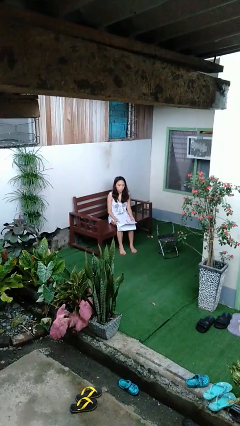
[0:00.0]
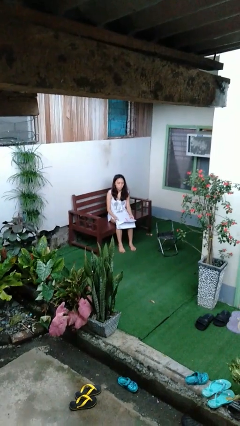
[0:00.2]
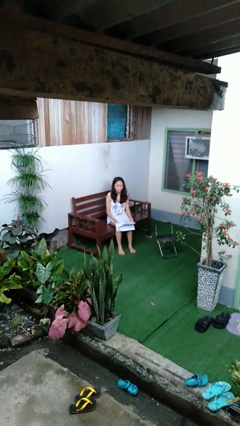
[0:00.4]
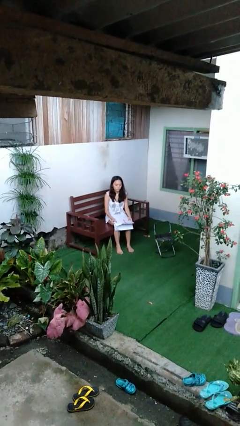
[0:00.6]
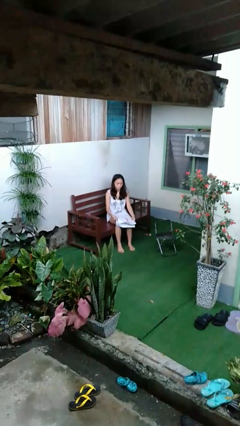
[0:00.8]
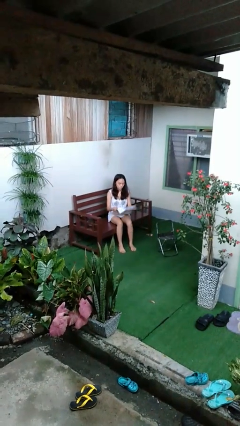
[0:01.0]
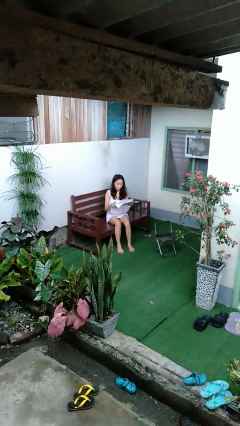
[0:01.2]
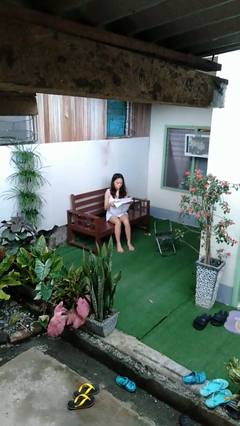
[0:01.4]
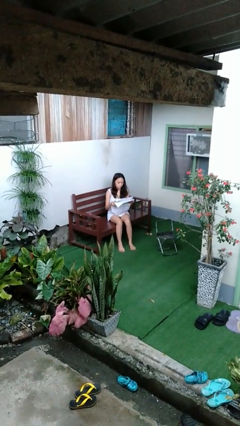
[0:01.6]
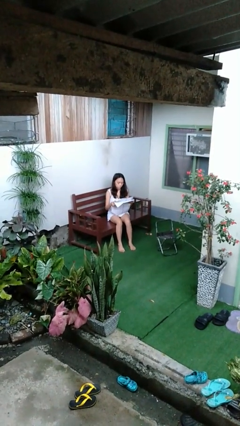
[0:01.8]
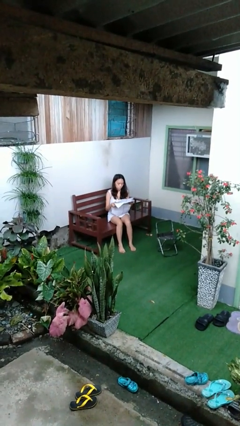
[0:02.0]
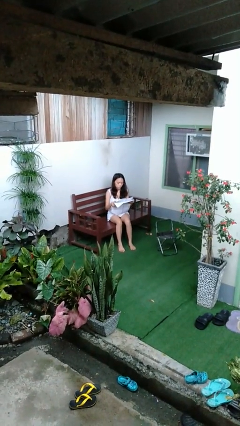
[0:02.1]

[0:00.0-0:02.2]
person reads newspaper

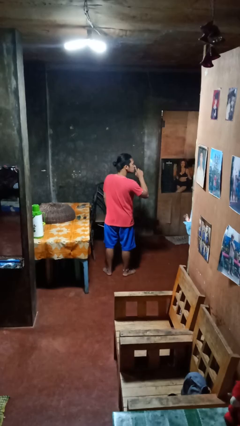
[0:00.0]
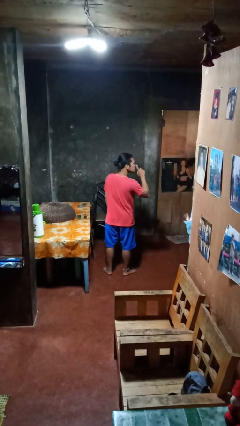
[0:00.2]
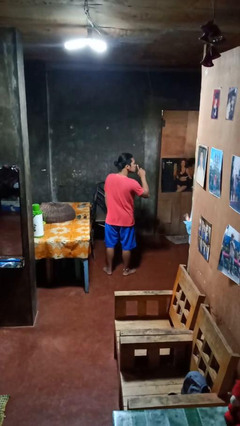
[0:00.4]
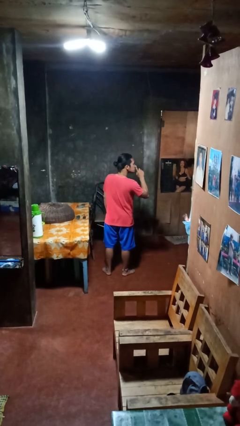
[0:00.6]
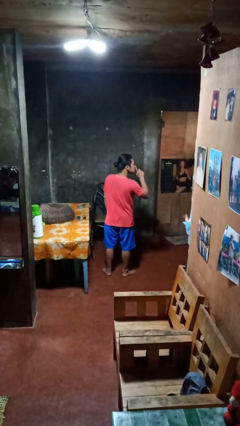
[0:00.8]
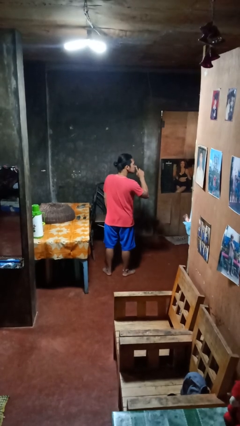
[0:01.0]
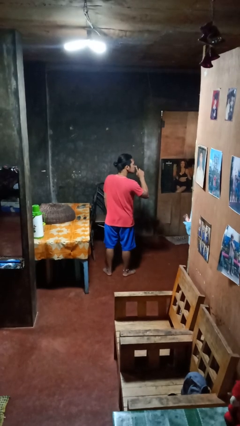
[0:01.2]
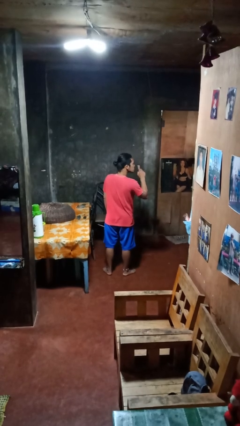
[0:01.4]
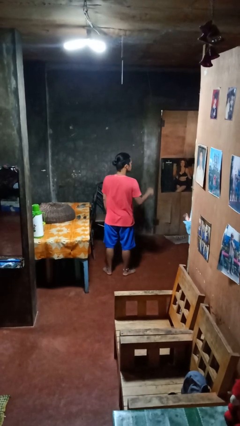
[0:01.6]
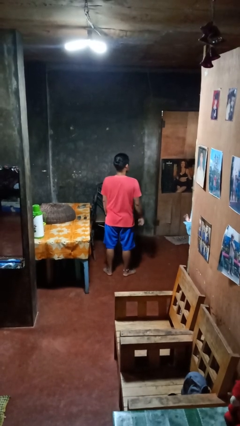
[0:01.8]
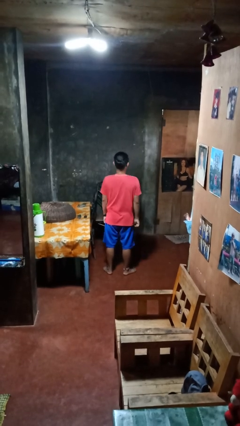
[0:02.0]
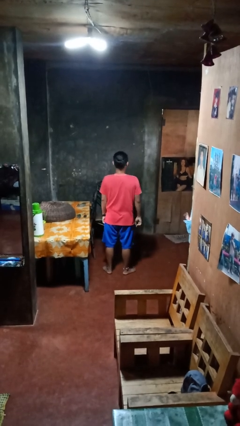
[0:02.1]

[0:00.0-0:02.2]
person gestures be quiet

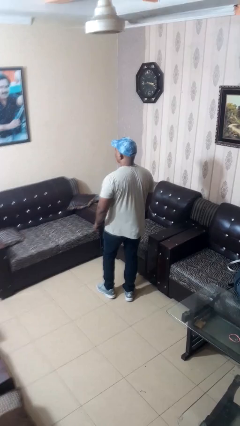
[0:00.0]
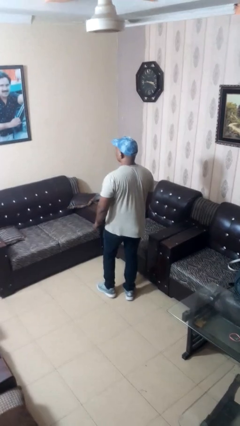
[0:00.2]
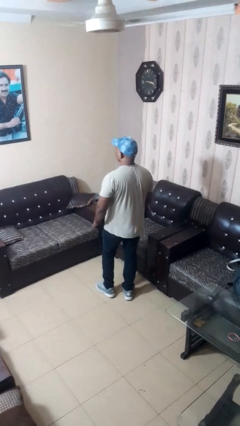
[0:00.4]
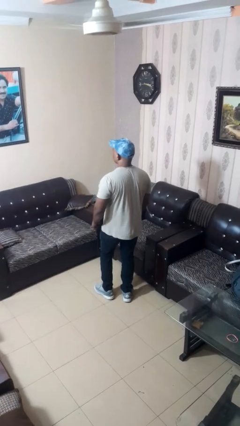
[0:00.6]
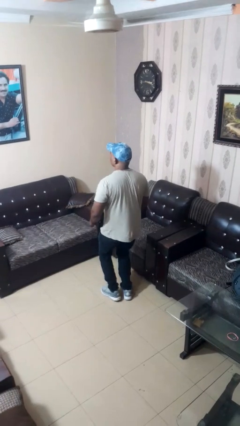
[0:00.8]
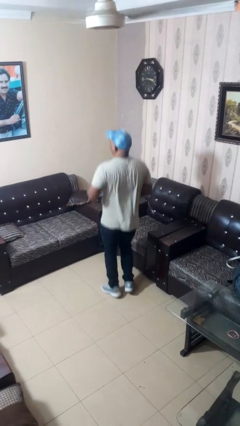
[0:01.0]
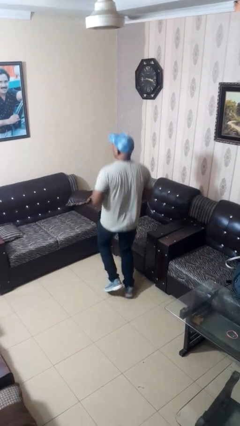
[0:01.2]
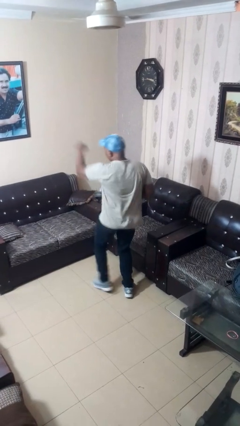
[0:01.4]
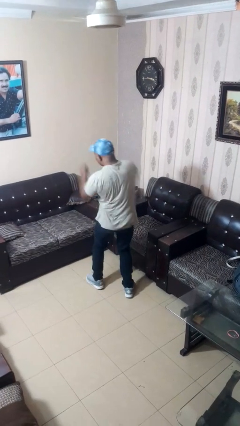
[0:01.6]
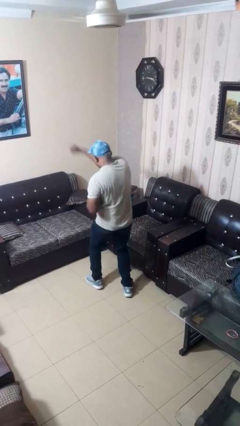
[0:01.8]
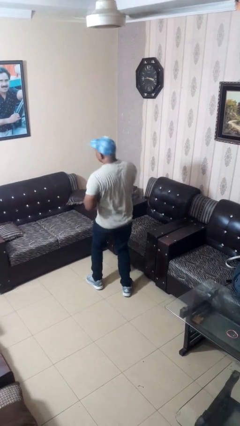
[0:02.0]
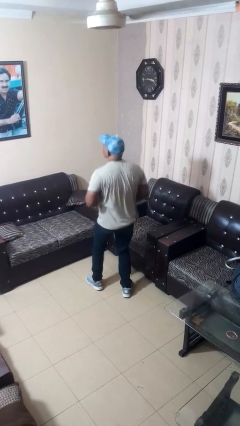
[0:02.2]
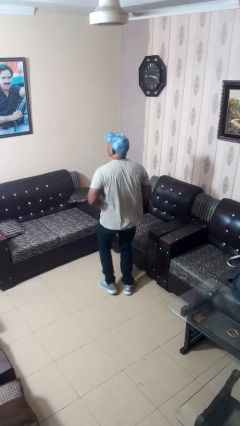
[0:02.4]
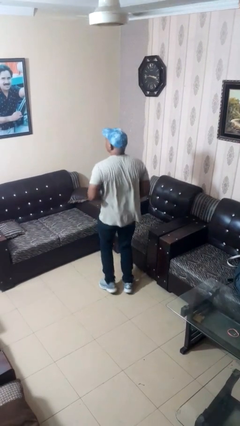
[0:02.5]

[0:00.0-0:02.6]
person punches

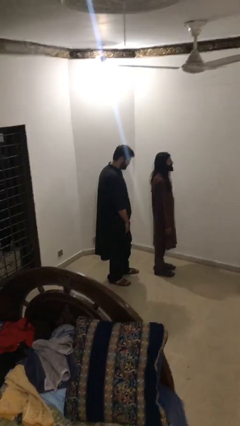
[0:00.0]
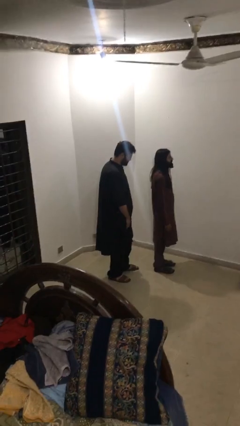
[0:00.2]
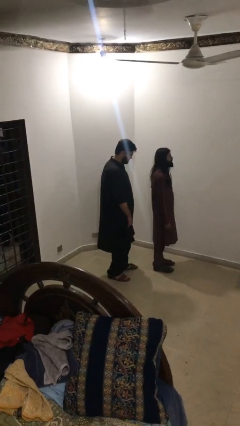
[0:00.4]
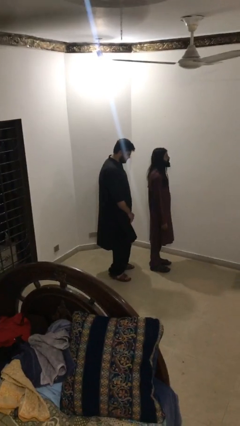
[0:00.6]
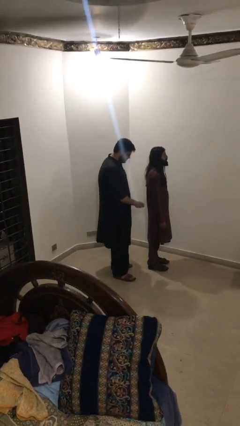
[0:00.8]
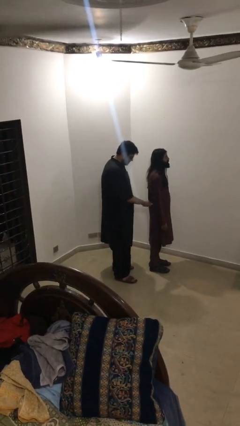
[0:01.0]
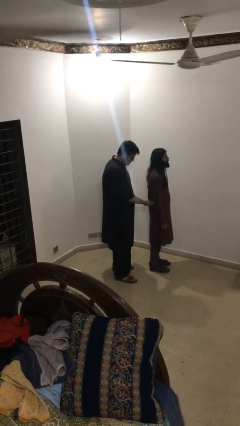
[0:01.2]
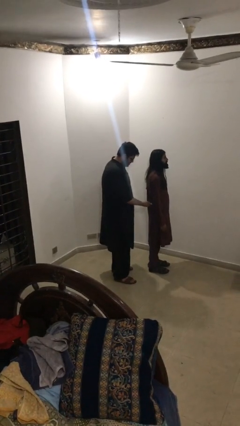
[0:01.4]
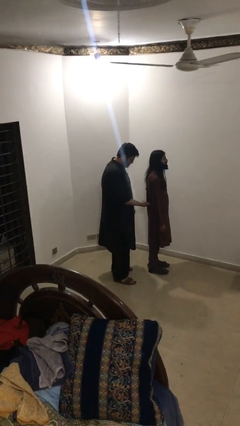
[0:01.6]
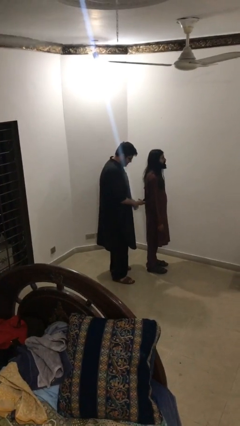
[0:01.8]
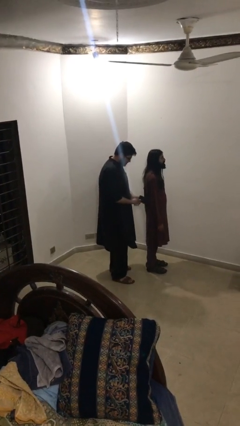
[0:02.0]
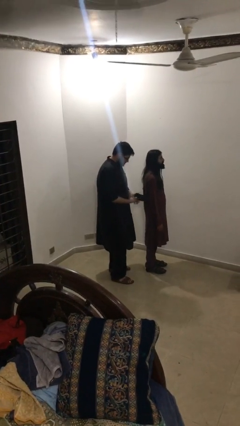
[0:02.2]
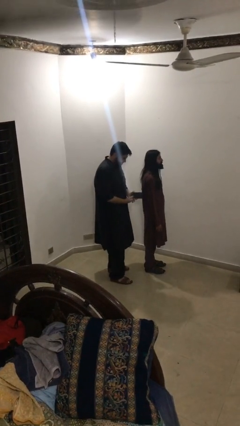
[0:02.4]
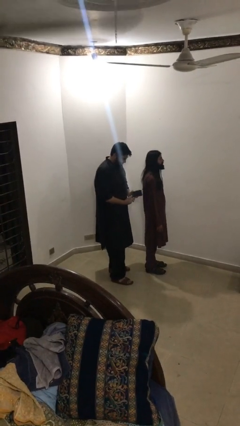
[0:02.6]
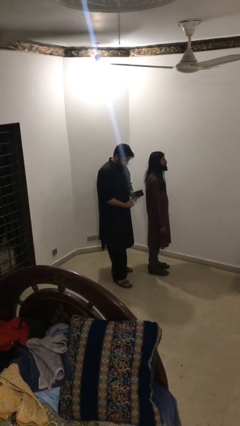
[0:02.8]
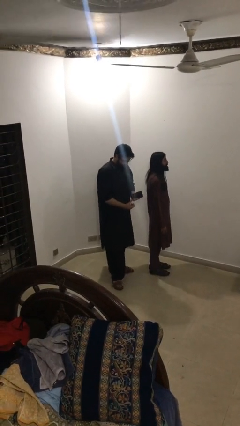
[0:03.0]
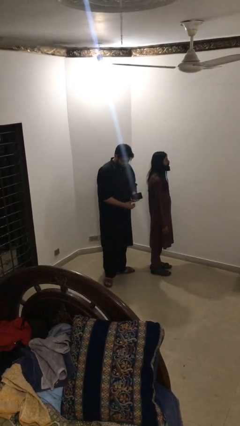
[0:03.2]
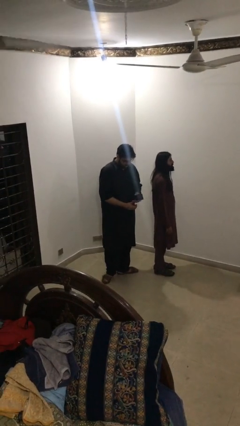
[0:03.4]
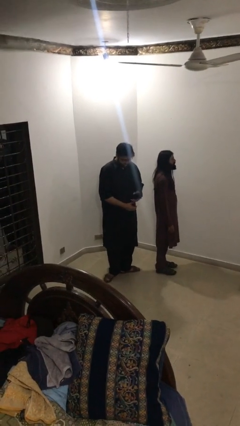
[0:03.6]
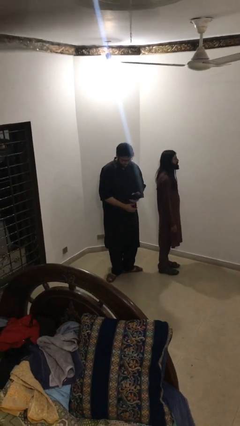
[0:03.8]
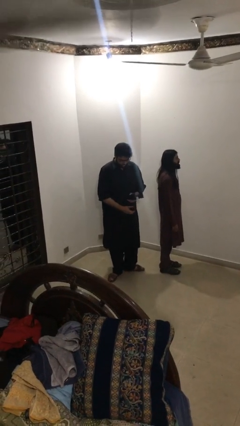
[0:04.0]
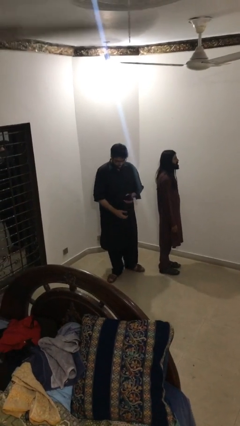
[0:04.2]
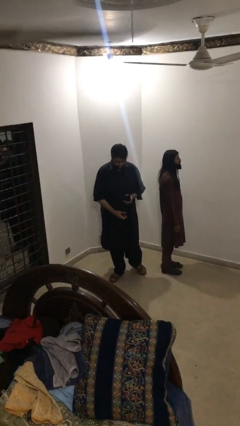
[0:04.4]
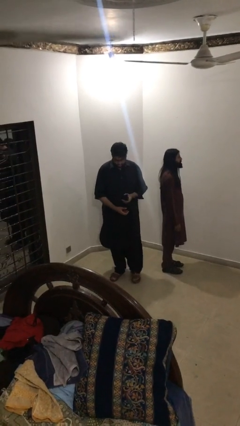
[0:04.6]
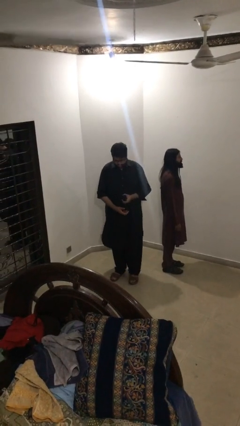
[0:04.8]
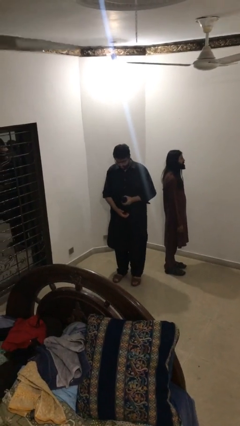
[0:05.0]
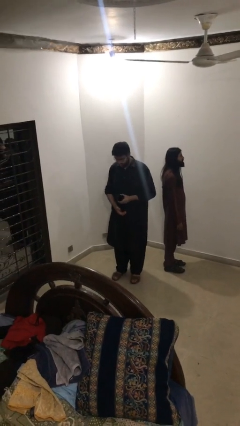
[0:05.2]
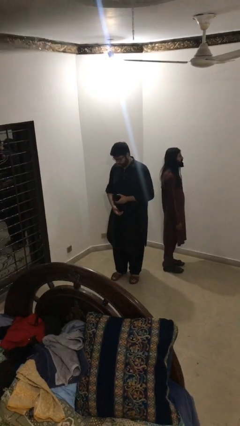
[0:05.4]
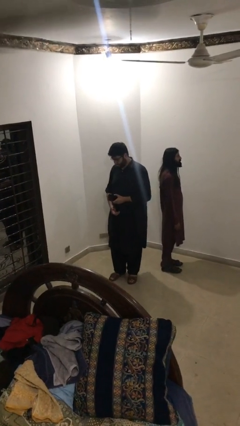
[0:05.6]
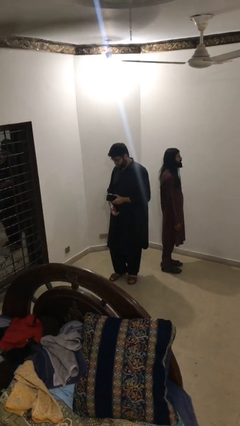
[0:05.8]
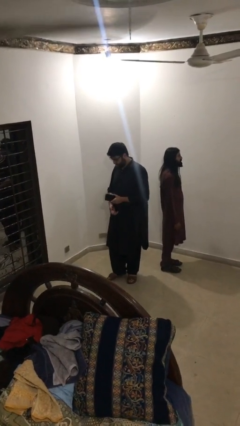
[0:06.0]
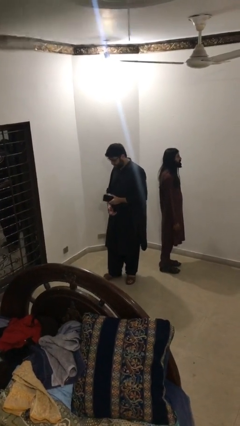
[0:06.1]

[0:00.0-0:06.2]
person steals object from person

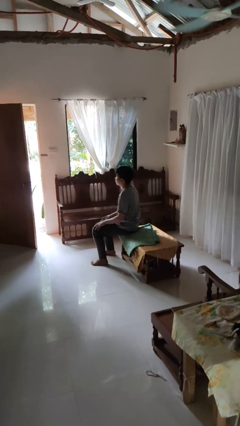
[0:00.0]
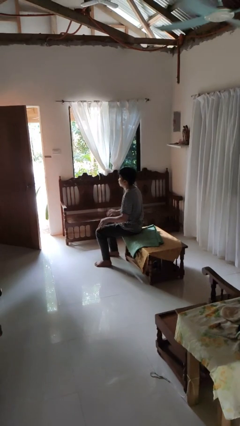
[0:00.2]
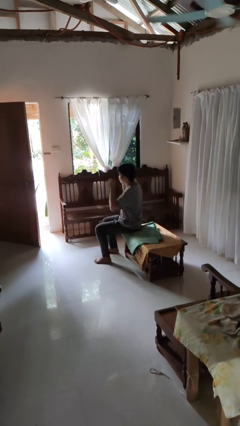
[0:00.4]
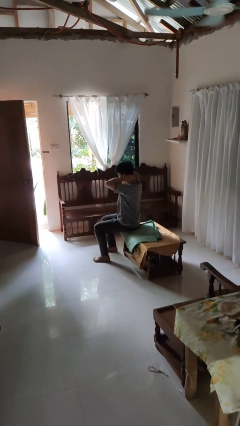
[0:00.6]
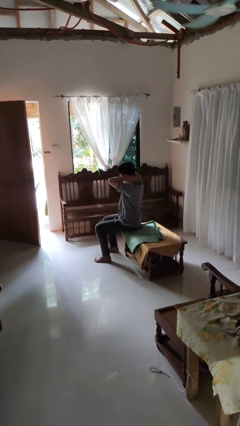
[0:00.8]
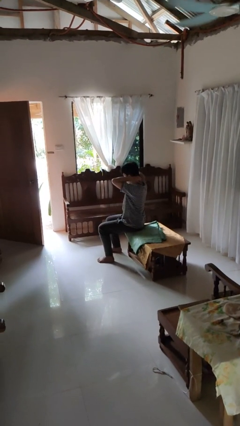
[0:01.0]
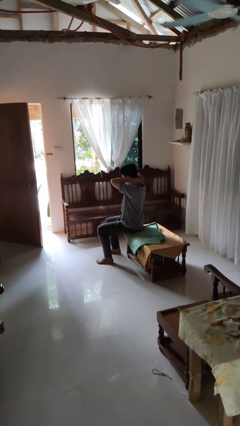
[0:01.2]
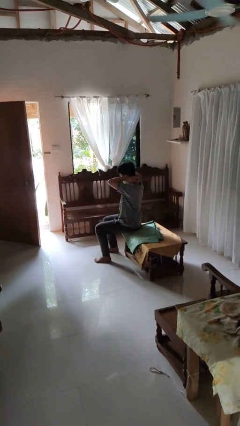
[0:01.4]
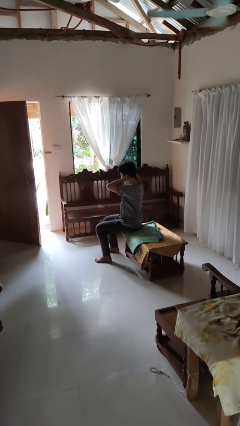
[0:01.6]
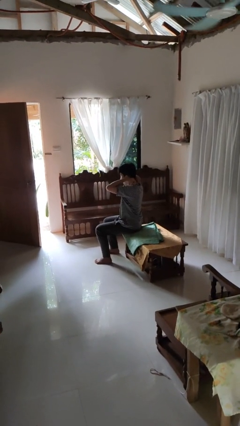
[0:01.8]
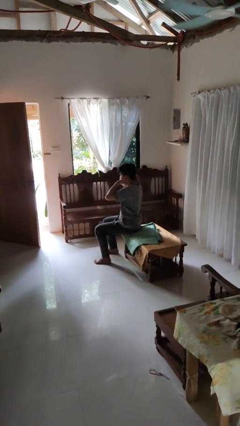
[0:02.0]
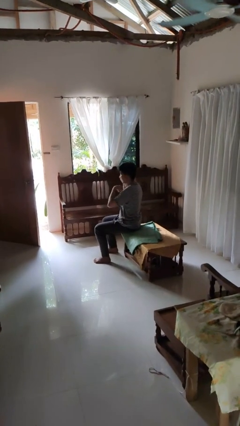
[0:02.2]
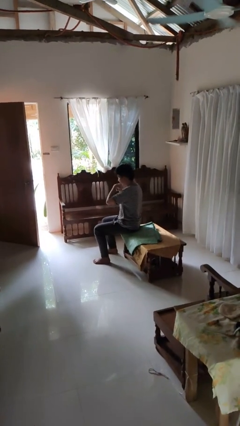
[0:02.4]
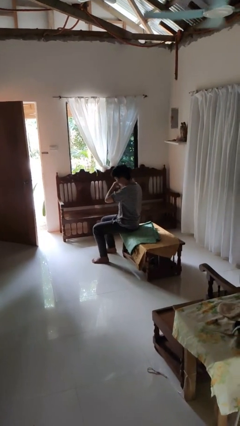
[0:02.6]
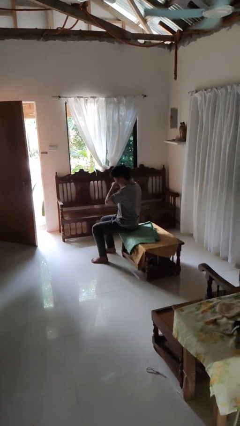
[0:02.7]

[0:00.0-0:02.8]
person takes off necklace

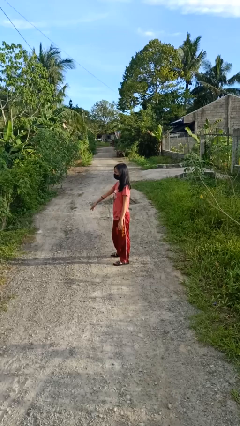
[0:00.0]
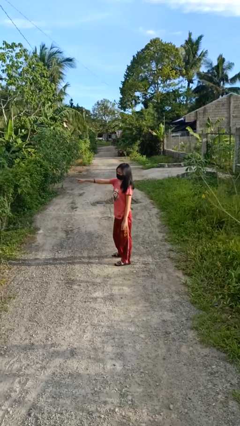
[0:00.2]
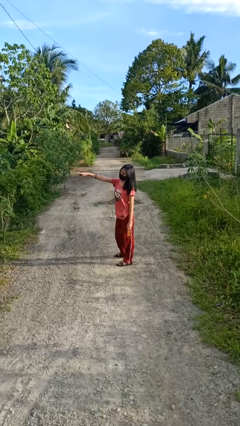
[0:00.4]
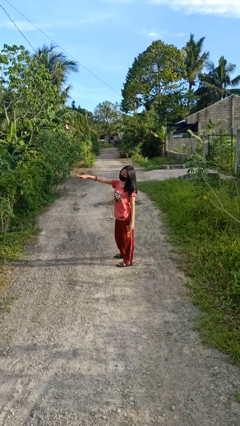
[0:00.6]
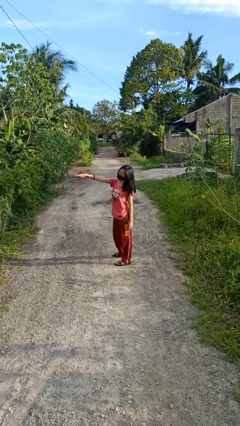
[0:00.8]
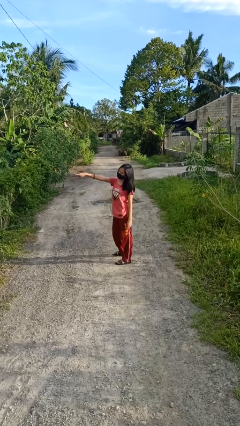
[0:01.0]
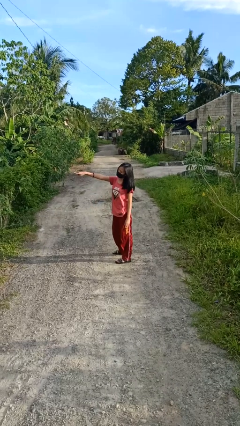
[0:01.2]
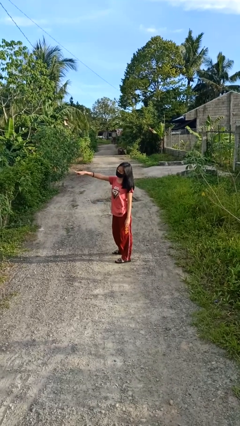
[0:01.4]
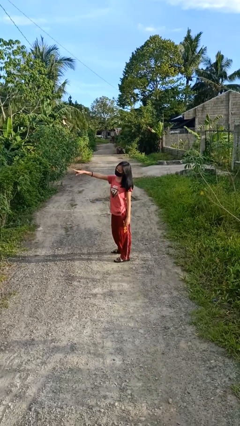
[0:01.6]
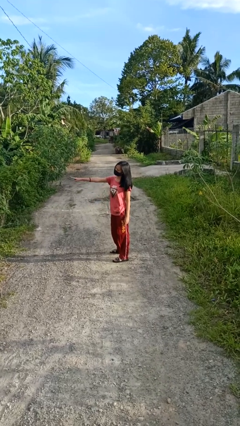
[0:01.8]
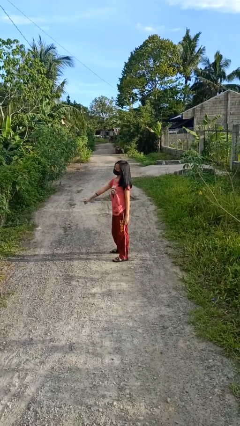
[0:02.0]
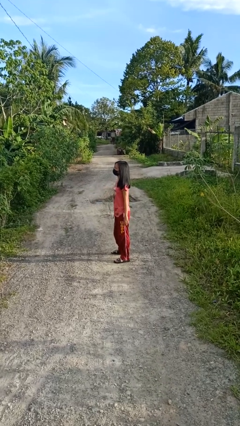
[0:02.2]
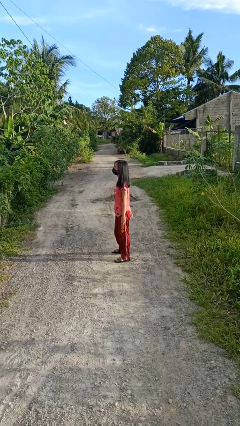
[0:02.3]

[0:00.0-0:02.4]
person points at person
